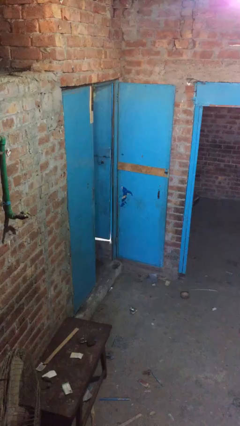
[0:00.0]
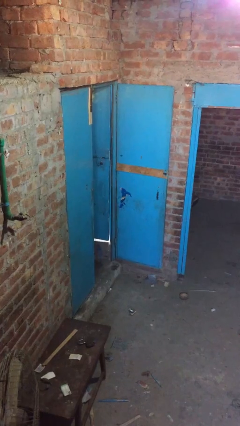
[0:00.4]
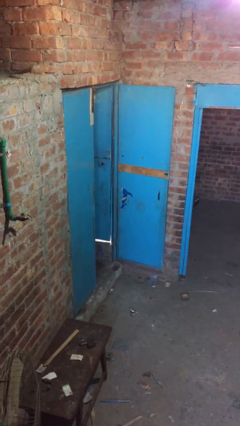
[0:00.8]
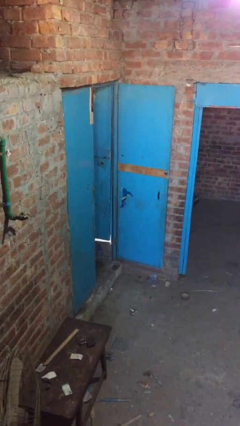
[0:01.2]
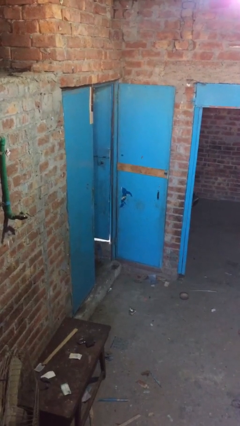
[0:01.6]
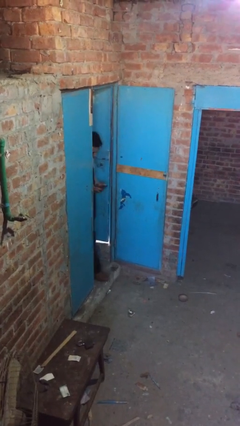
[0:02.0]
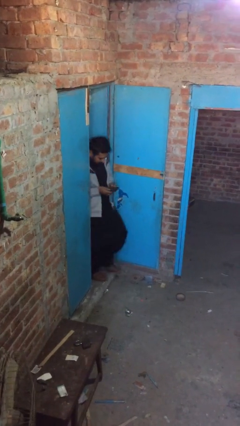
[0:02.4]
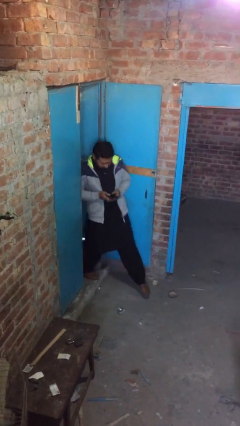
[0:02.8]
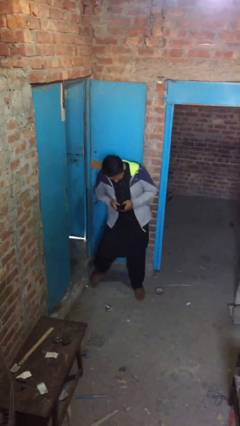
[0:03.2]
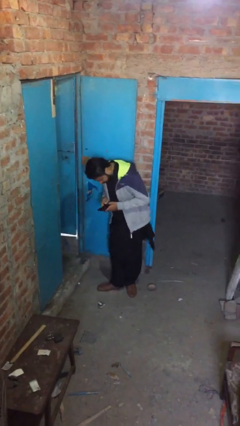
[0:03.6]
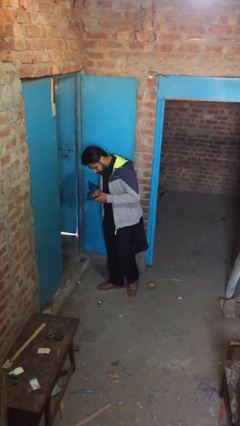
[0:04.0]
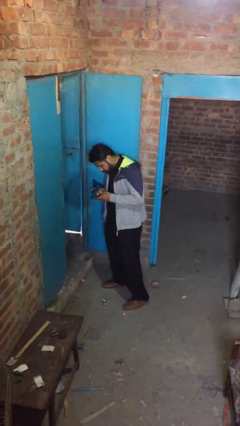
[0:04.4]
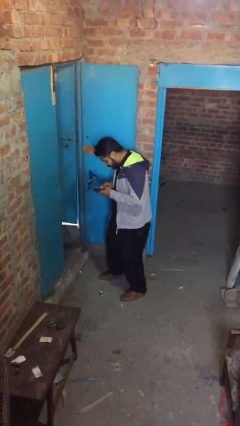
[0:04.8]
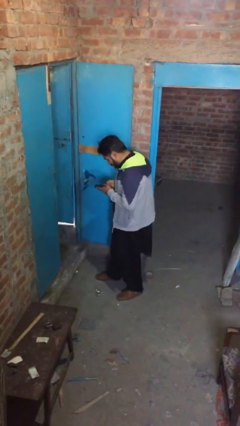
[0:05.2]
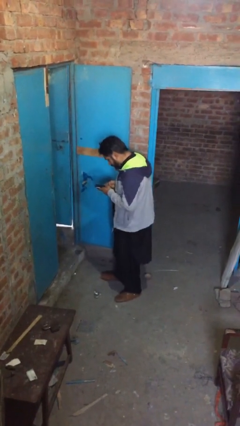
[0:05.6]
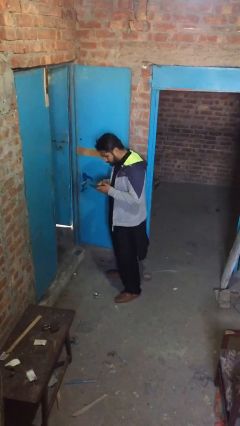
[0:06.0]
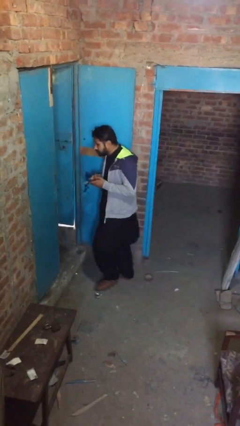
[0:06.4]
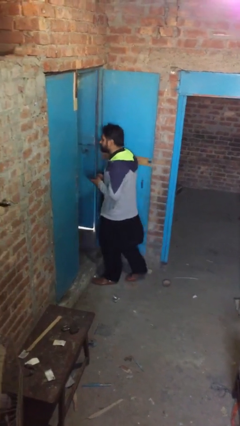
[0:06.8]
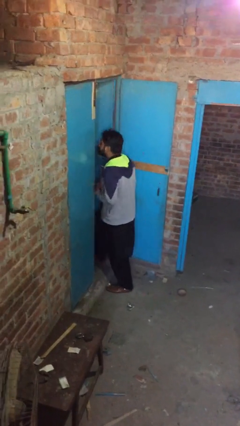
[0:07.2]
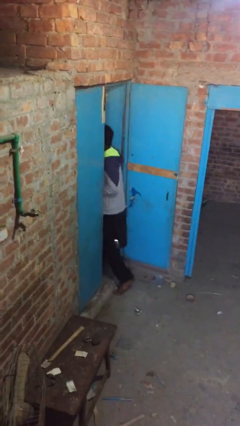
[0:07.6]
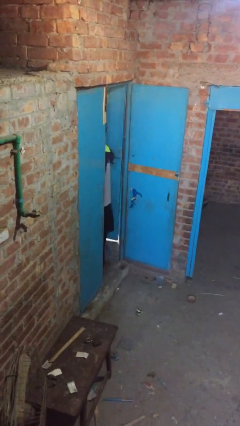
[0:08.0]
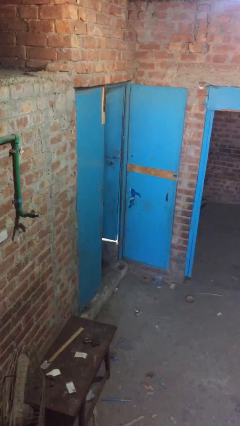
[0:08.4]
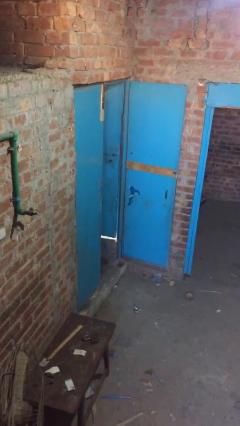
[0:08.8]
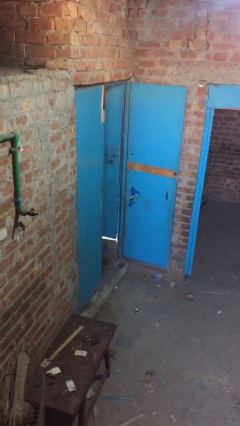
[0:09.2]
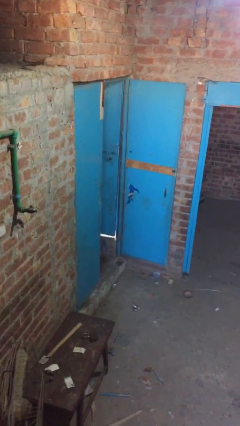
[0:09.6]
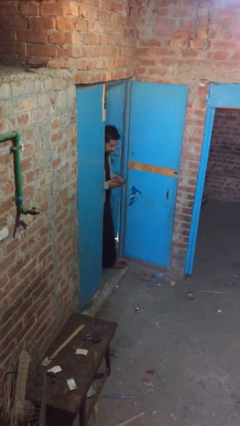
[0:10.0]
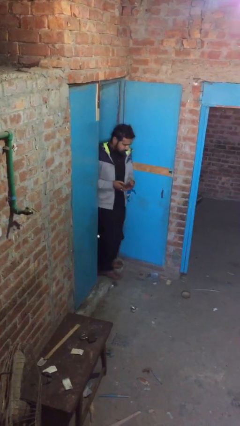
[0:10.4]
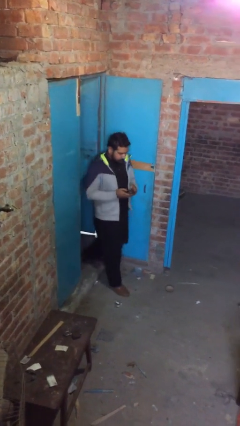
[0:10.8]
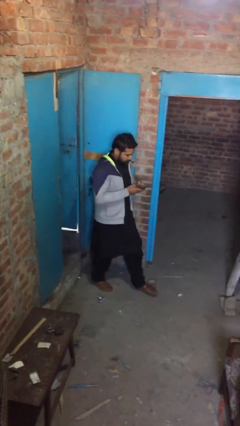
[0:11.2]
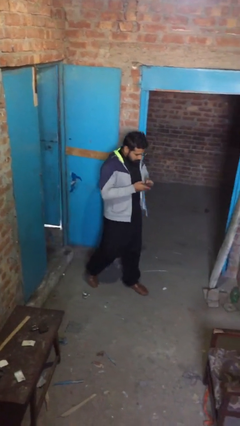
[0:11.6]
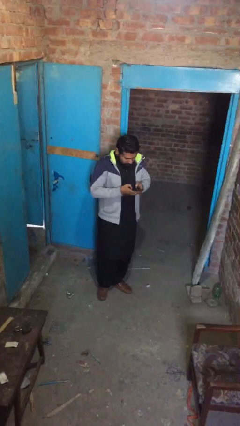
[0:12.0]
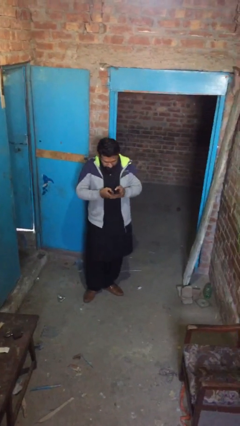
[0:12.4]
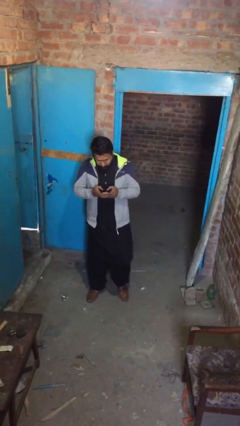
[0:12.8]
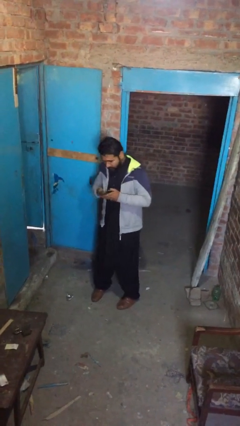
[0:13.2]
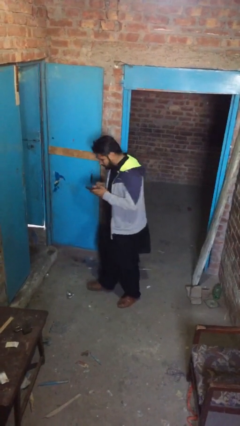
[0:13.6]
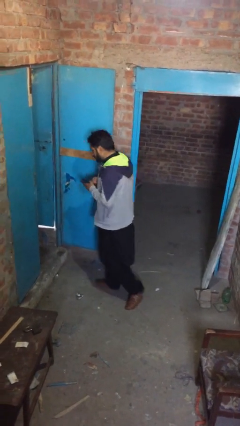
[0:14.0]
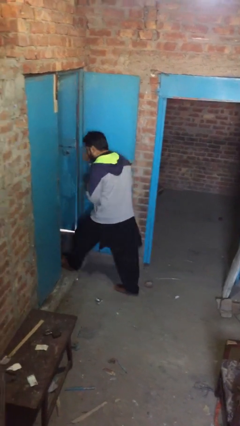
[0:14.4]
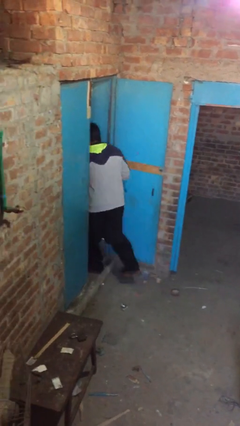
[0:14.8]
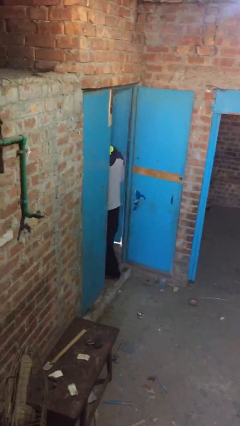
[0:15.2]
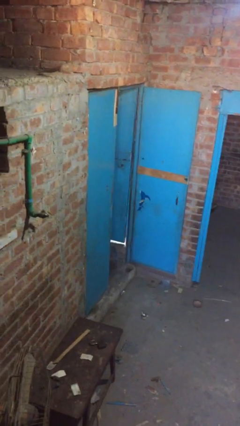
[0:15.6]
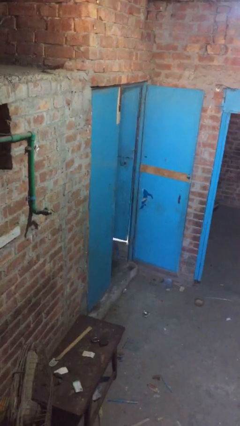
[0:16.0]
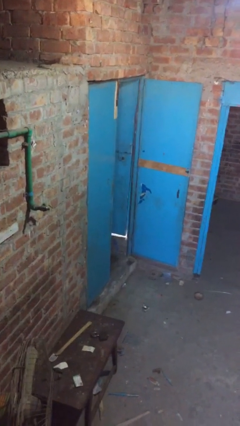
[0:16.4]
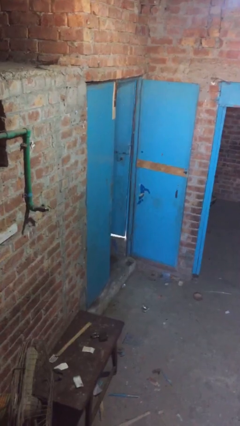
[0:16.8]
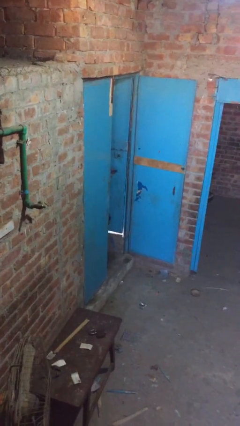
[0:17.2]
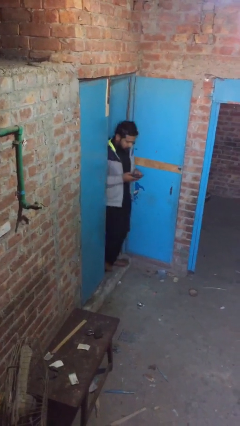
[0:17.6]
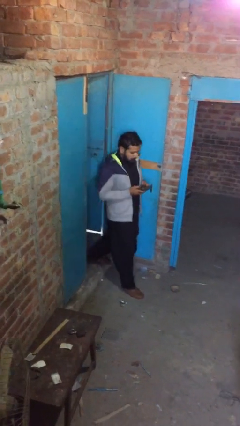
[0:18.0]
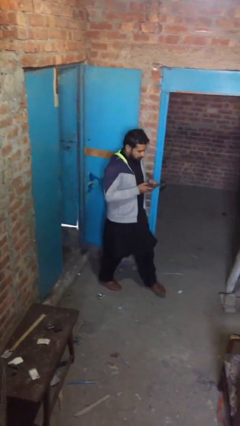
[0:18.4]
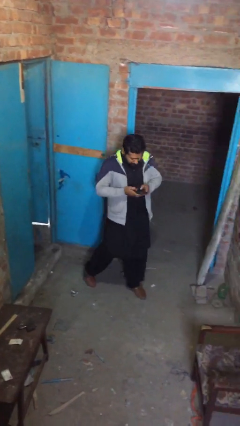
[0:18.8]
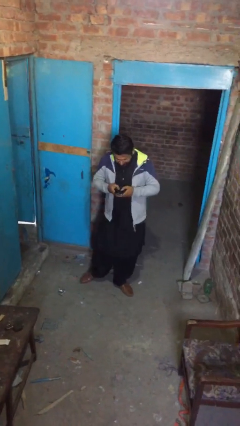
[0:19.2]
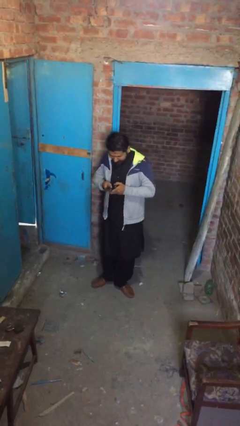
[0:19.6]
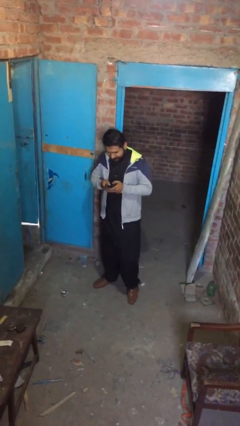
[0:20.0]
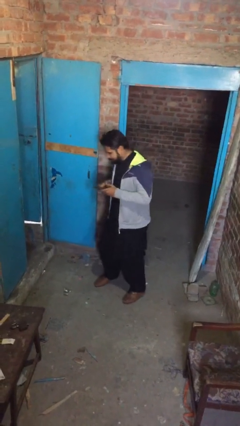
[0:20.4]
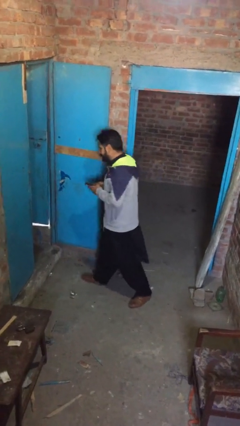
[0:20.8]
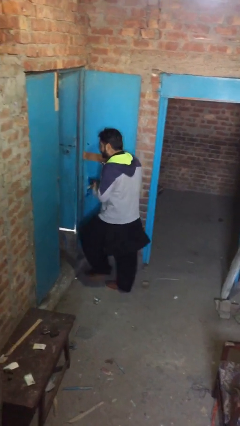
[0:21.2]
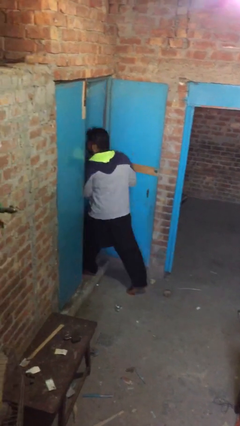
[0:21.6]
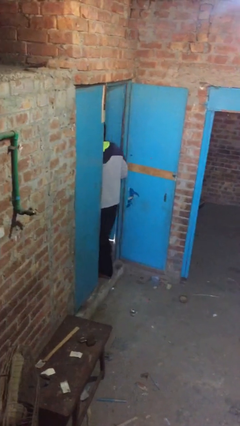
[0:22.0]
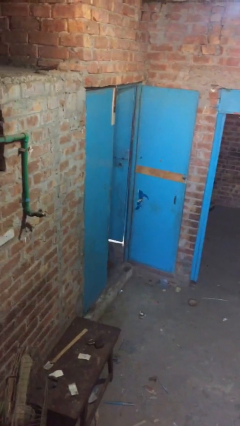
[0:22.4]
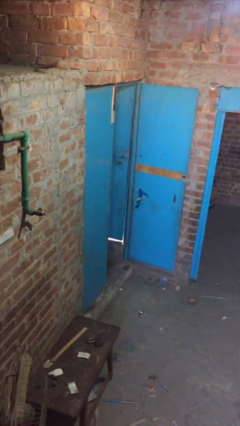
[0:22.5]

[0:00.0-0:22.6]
person texts on phone

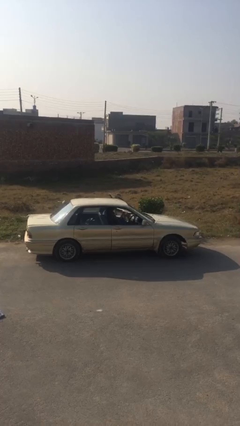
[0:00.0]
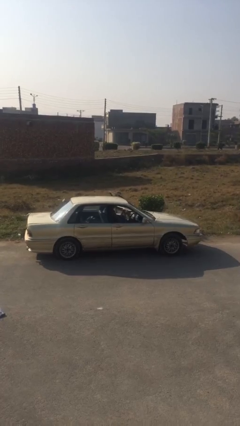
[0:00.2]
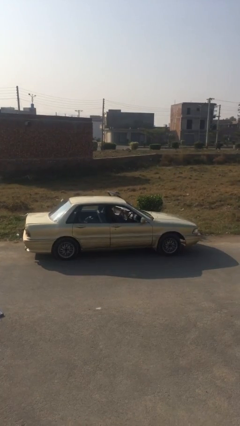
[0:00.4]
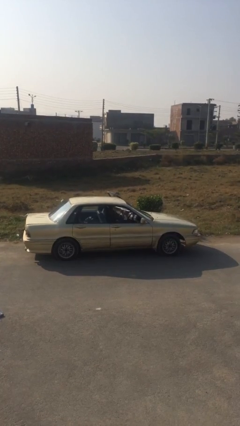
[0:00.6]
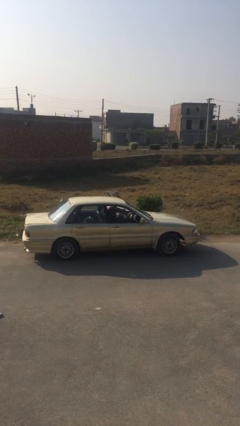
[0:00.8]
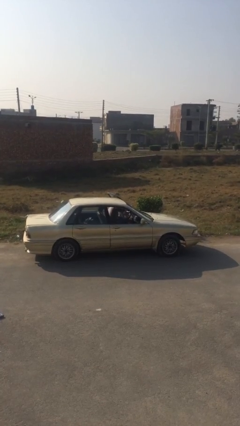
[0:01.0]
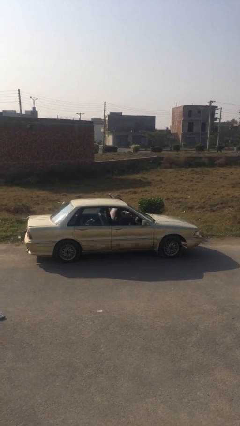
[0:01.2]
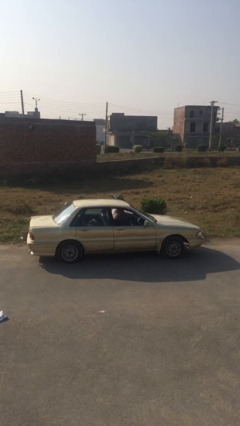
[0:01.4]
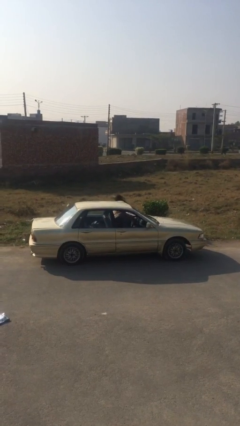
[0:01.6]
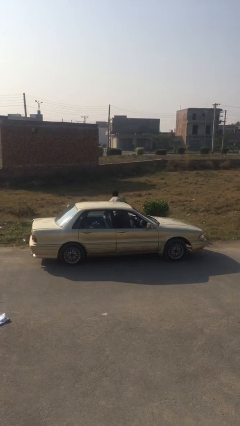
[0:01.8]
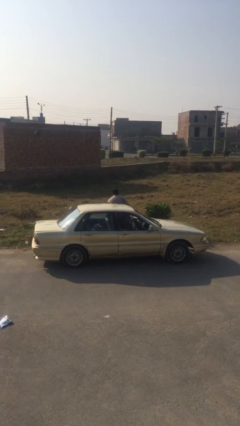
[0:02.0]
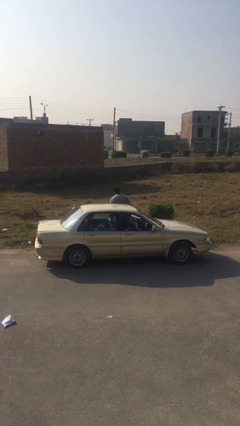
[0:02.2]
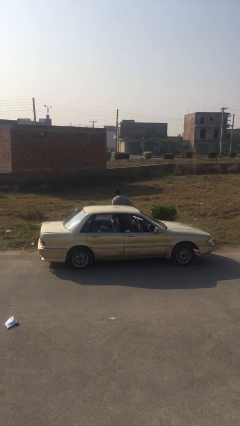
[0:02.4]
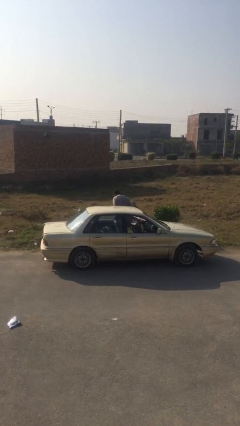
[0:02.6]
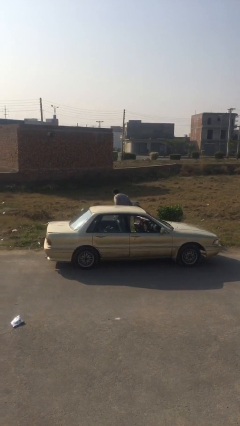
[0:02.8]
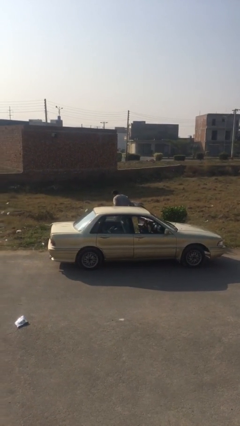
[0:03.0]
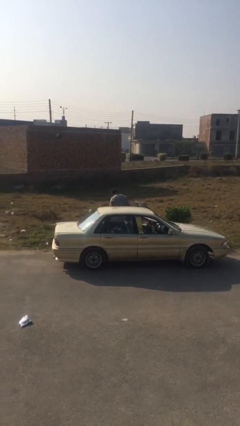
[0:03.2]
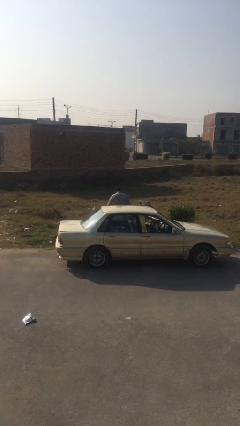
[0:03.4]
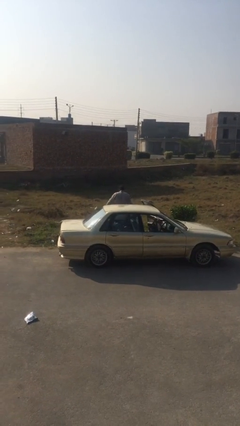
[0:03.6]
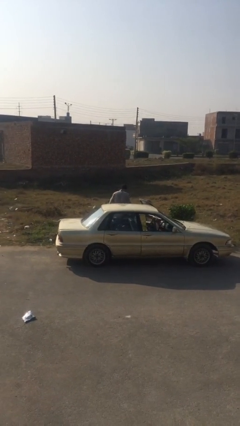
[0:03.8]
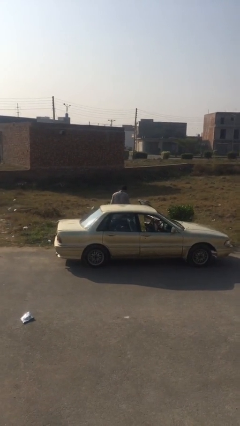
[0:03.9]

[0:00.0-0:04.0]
person exits car

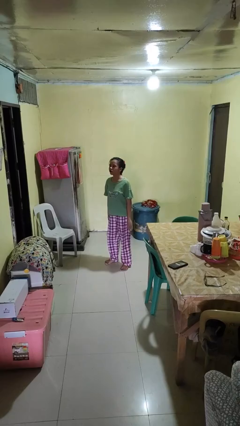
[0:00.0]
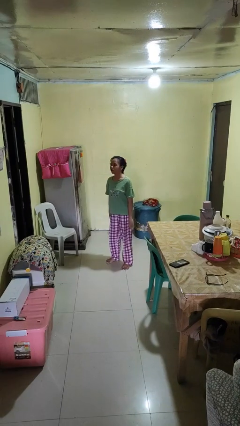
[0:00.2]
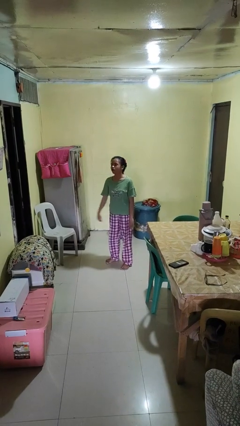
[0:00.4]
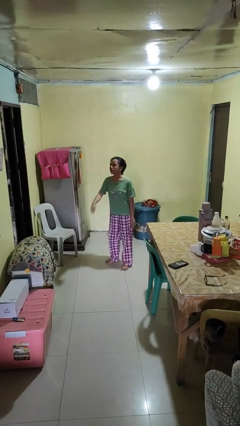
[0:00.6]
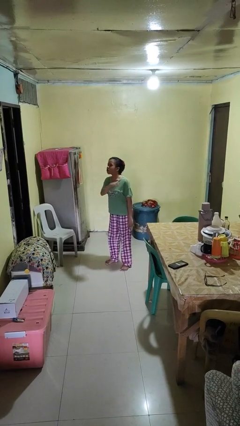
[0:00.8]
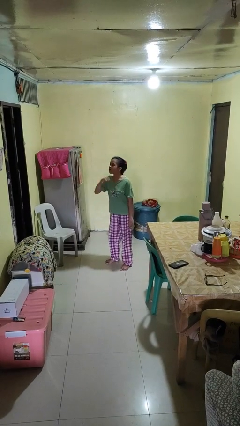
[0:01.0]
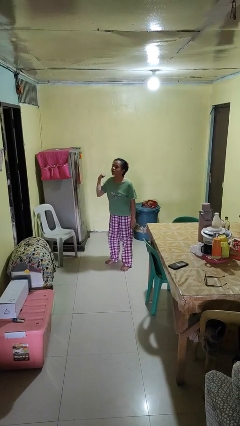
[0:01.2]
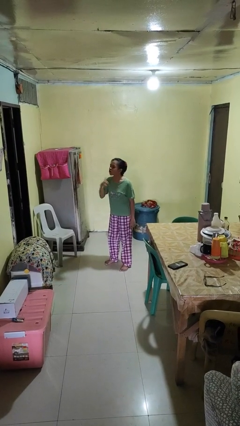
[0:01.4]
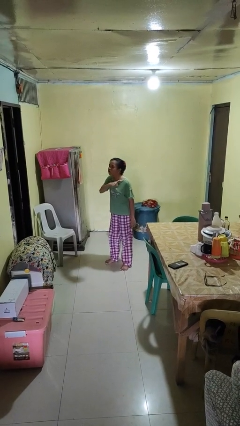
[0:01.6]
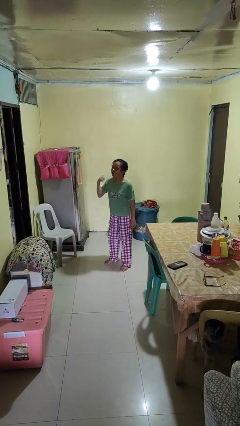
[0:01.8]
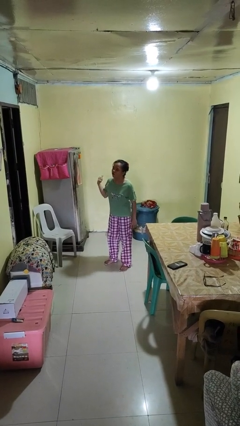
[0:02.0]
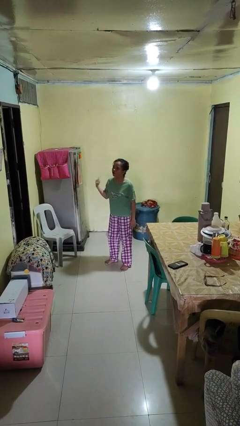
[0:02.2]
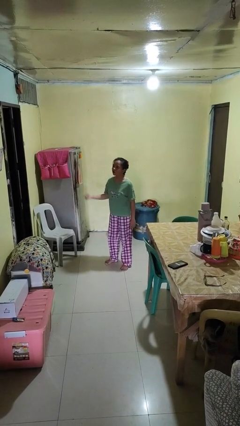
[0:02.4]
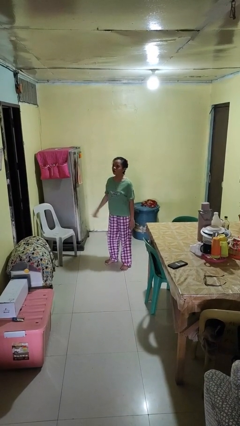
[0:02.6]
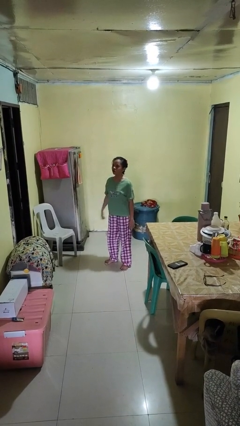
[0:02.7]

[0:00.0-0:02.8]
person gestures cut

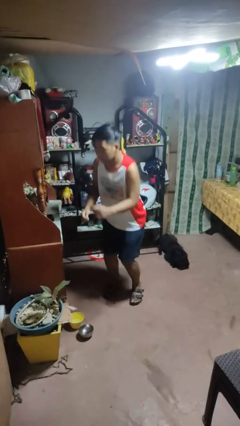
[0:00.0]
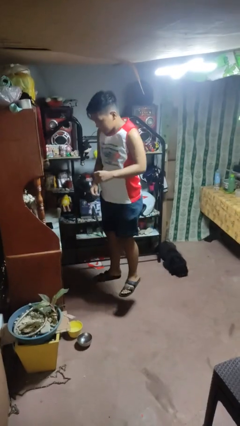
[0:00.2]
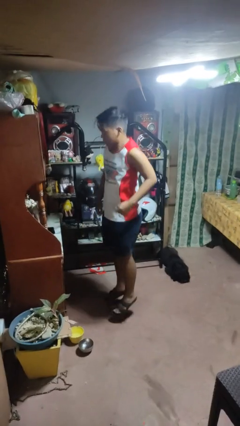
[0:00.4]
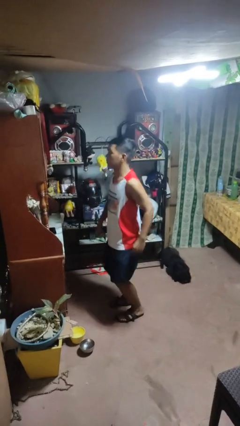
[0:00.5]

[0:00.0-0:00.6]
person jumps
